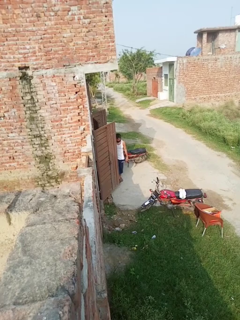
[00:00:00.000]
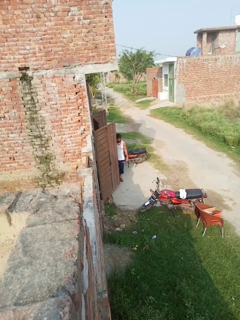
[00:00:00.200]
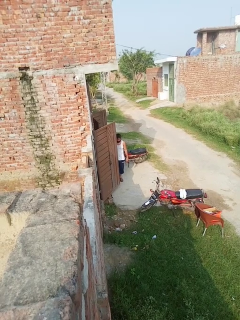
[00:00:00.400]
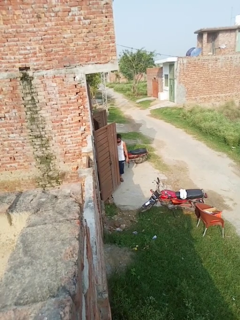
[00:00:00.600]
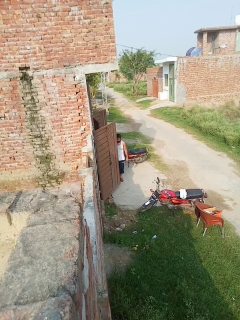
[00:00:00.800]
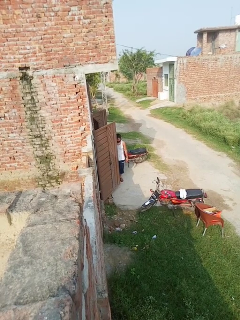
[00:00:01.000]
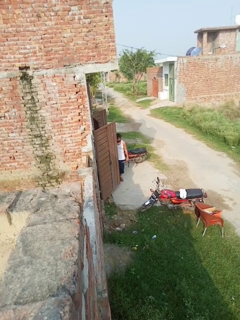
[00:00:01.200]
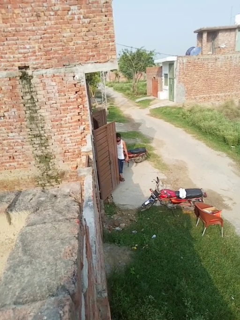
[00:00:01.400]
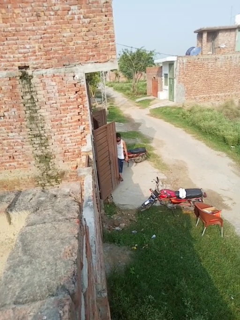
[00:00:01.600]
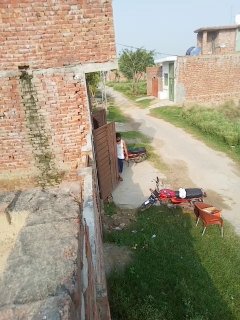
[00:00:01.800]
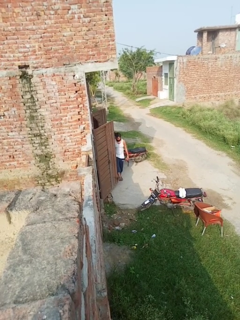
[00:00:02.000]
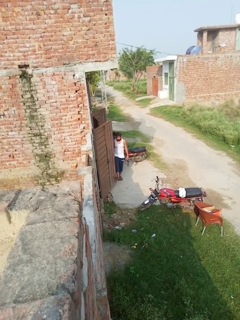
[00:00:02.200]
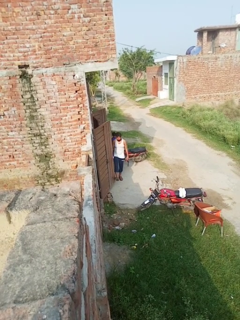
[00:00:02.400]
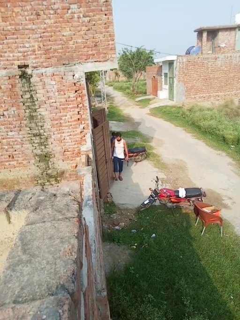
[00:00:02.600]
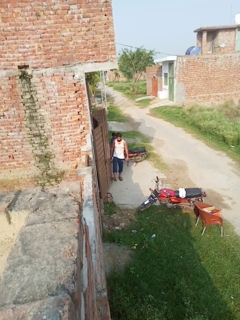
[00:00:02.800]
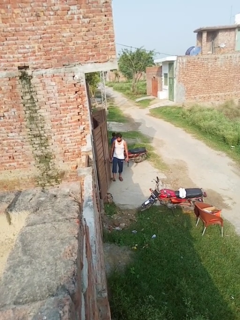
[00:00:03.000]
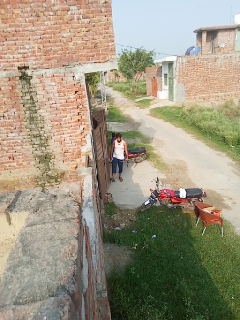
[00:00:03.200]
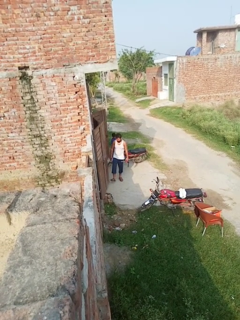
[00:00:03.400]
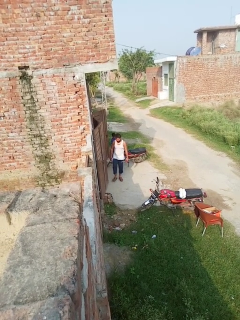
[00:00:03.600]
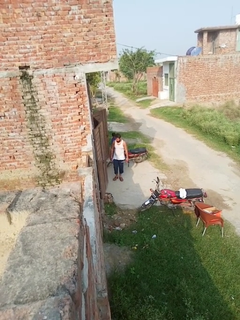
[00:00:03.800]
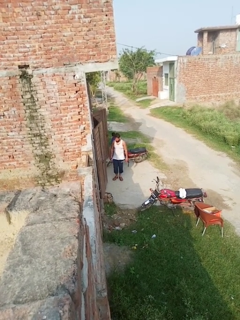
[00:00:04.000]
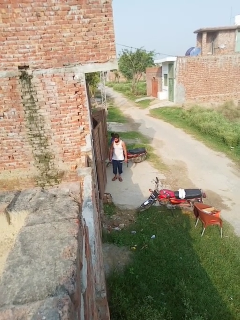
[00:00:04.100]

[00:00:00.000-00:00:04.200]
person closes door with foot

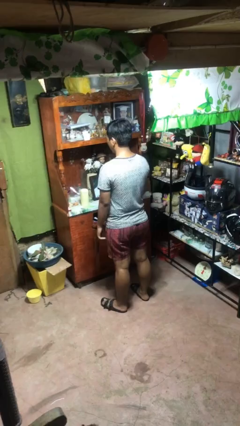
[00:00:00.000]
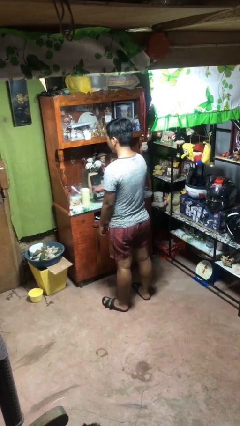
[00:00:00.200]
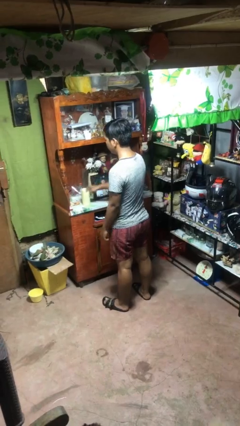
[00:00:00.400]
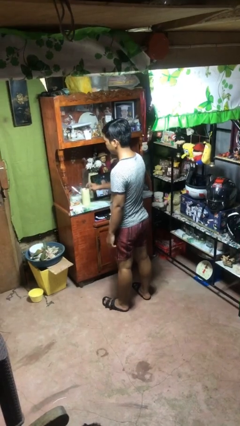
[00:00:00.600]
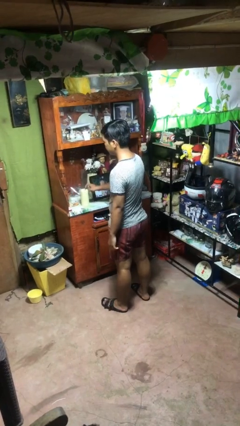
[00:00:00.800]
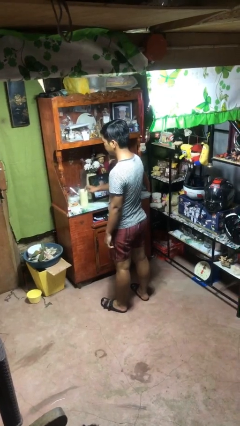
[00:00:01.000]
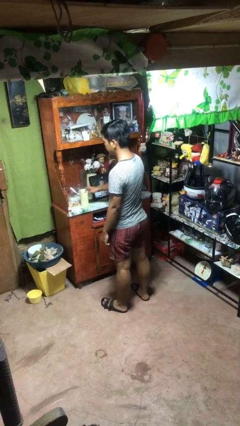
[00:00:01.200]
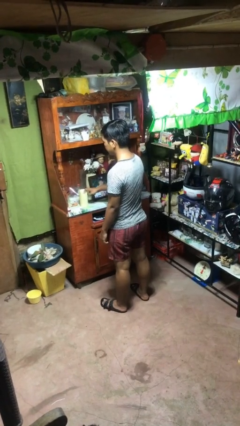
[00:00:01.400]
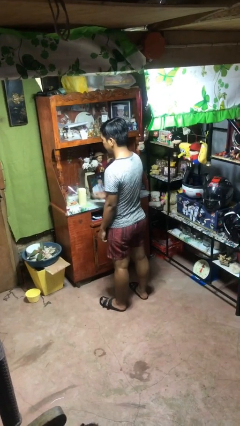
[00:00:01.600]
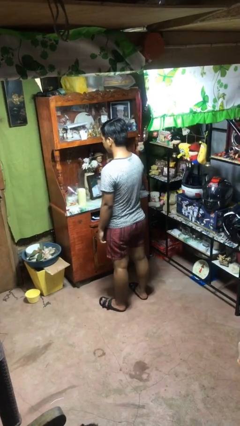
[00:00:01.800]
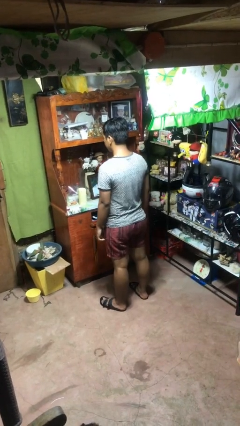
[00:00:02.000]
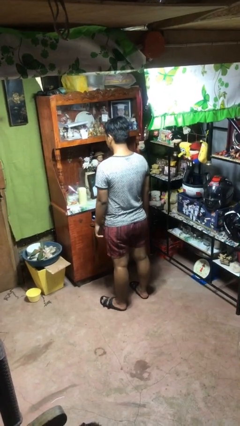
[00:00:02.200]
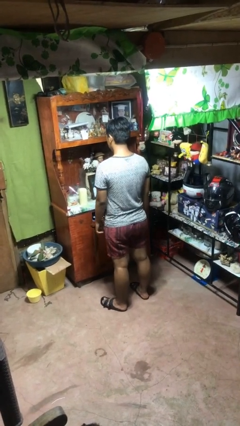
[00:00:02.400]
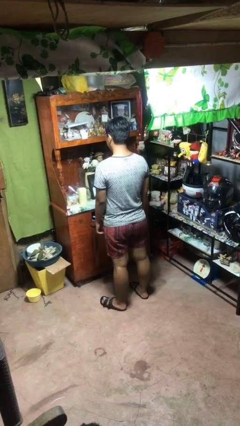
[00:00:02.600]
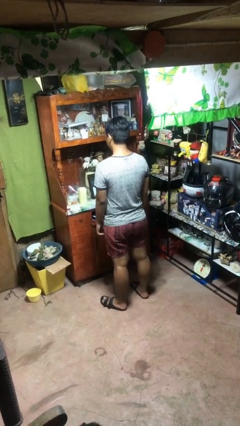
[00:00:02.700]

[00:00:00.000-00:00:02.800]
person taps object with finger

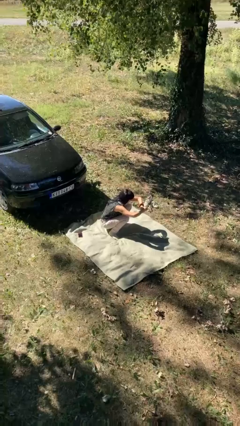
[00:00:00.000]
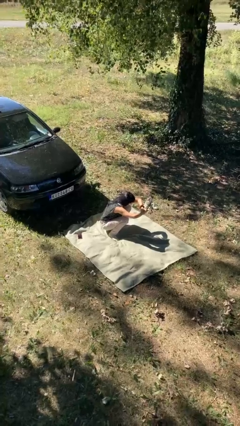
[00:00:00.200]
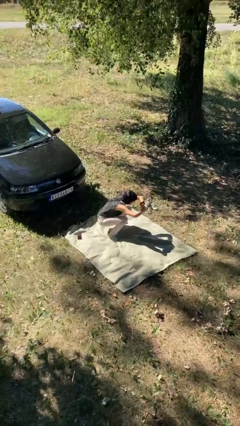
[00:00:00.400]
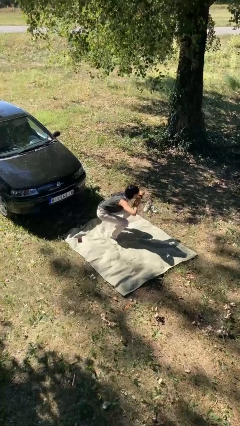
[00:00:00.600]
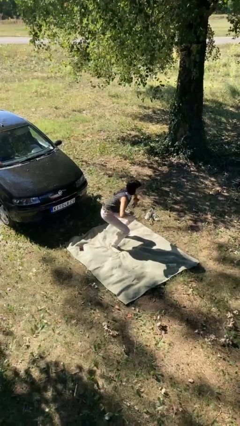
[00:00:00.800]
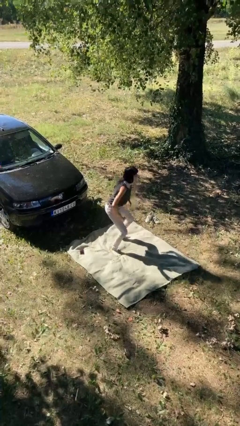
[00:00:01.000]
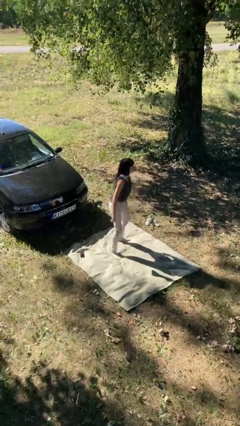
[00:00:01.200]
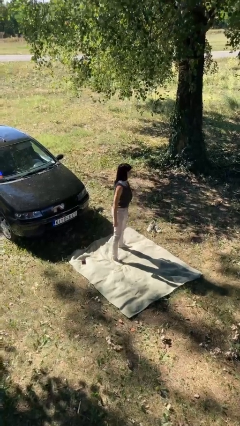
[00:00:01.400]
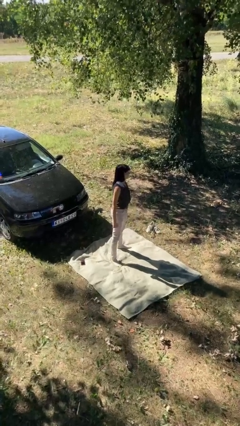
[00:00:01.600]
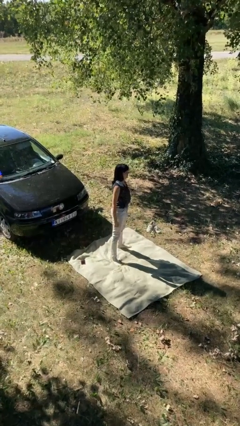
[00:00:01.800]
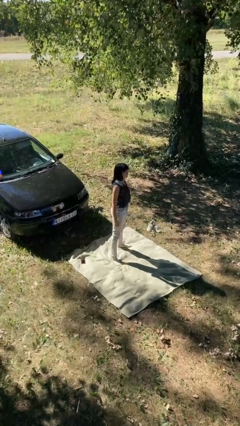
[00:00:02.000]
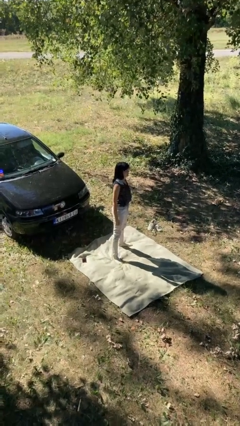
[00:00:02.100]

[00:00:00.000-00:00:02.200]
person stands up

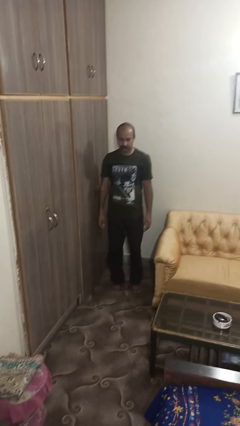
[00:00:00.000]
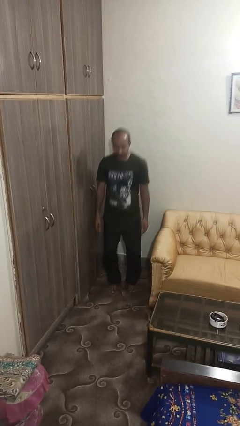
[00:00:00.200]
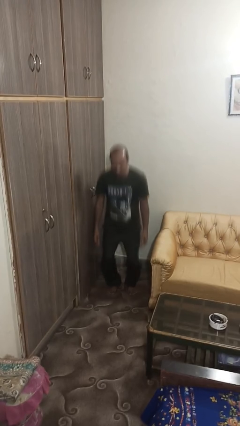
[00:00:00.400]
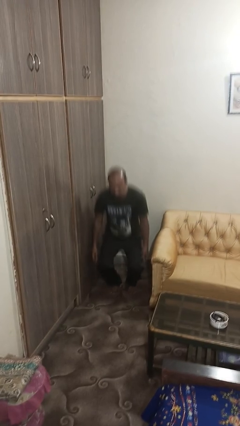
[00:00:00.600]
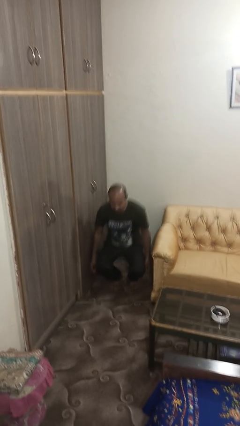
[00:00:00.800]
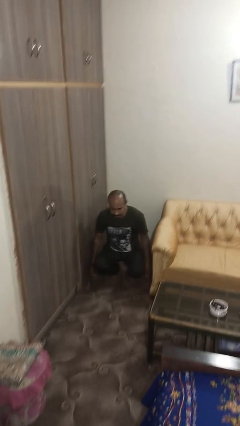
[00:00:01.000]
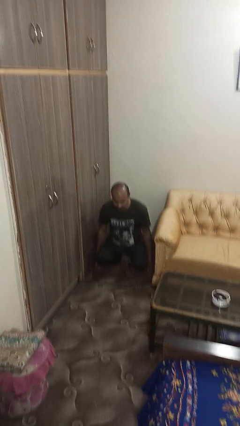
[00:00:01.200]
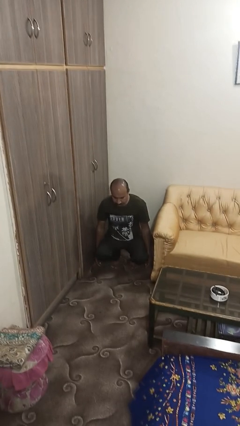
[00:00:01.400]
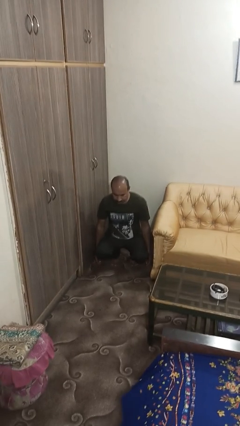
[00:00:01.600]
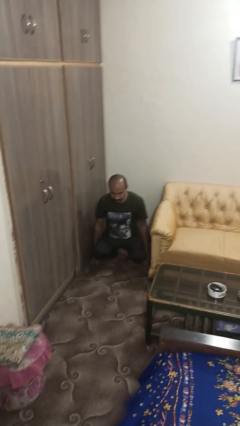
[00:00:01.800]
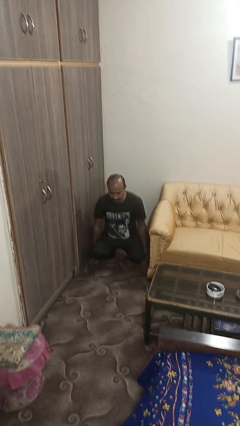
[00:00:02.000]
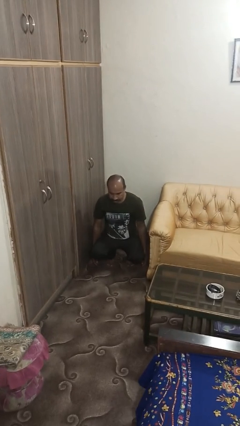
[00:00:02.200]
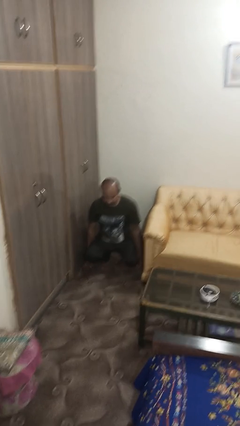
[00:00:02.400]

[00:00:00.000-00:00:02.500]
person squats

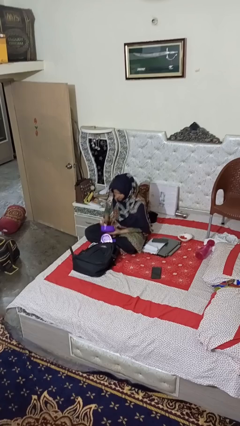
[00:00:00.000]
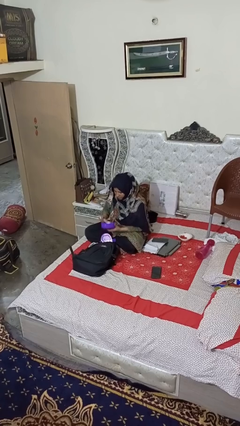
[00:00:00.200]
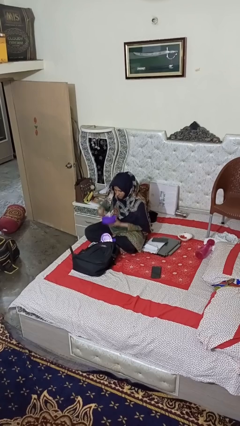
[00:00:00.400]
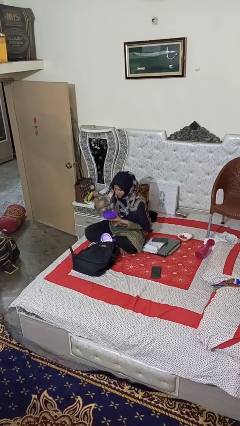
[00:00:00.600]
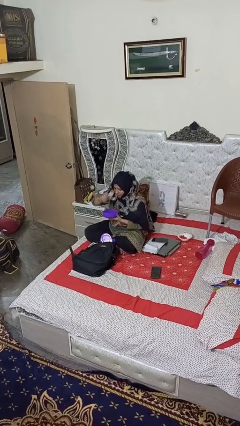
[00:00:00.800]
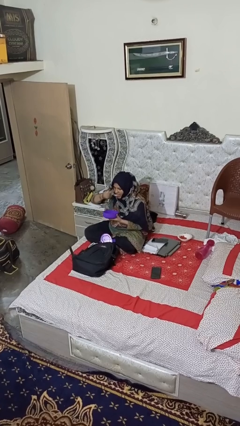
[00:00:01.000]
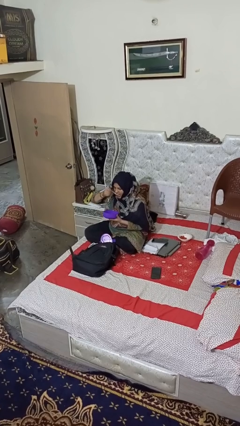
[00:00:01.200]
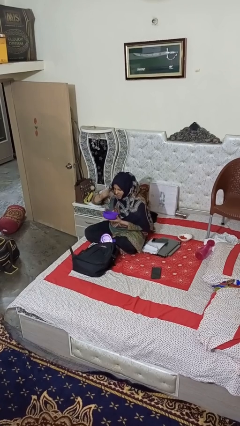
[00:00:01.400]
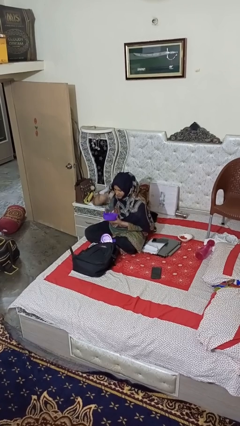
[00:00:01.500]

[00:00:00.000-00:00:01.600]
person eats snack from bag

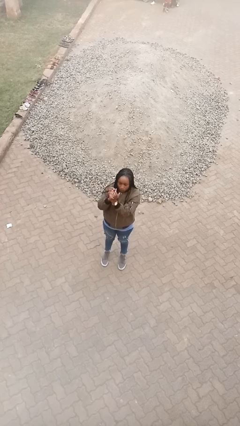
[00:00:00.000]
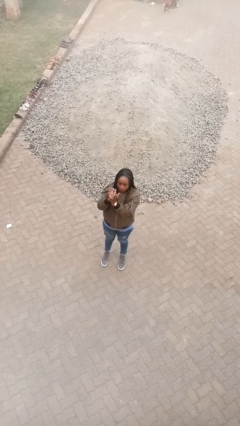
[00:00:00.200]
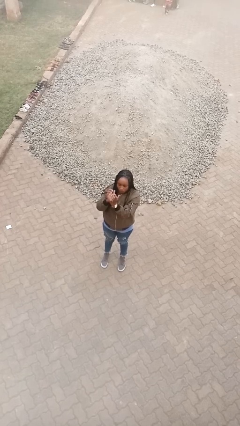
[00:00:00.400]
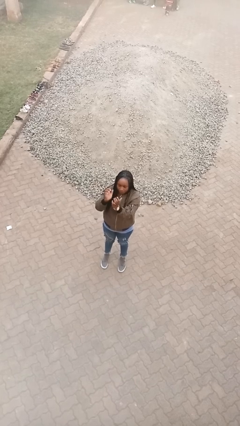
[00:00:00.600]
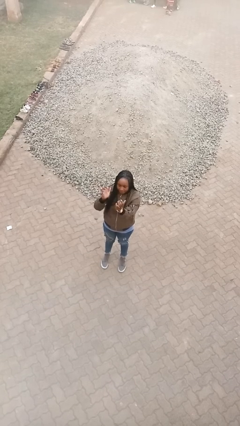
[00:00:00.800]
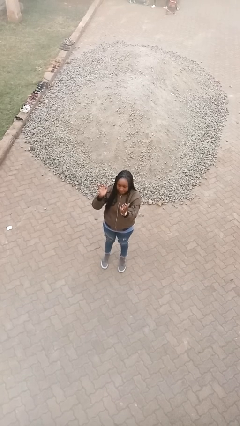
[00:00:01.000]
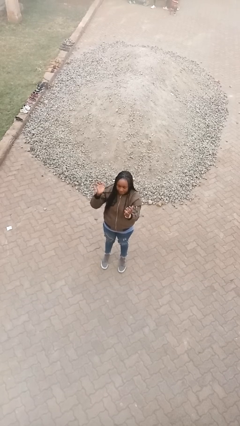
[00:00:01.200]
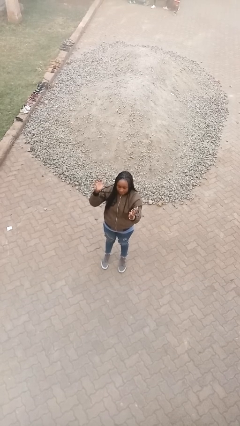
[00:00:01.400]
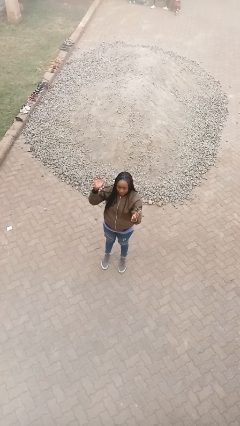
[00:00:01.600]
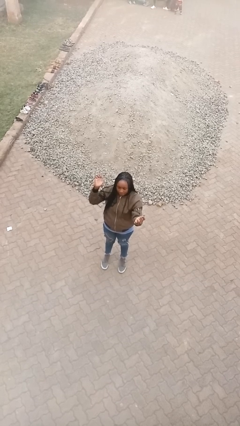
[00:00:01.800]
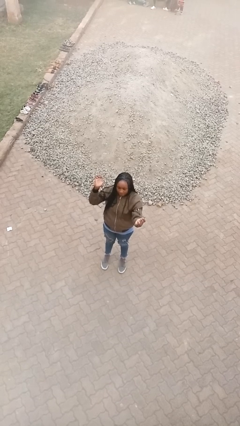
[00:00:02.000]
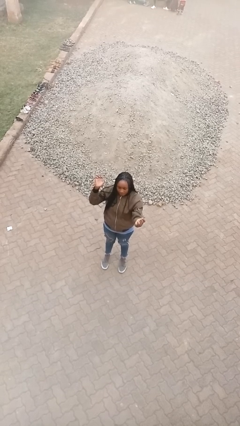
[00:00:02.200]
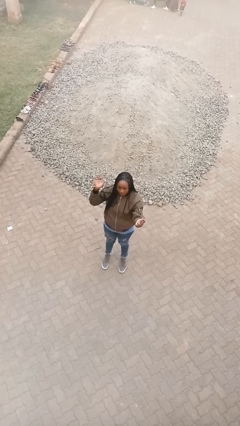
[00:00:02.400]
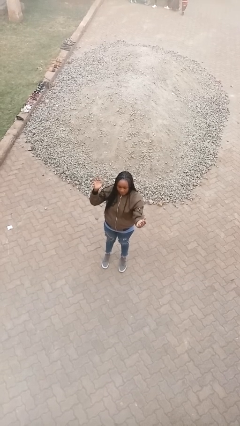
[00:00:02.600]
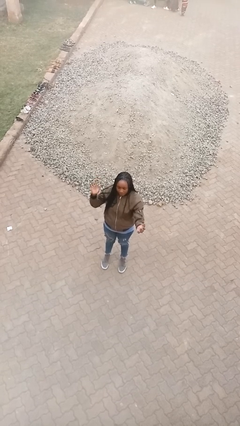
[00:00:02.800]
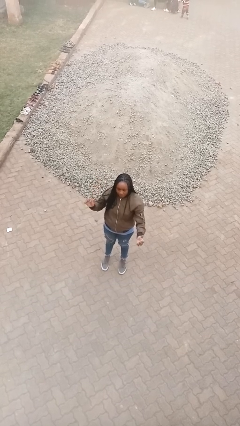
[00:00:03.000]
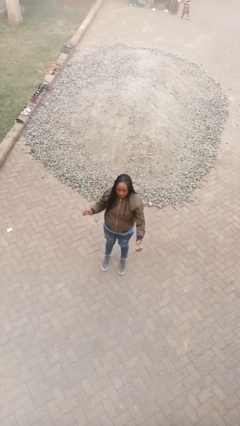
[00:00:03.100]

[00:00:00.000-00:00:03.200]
person gestures zoom out

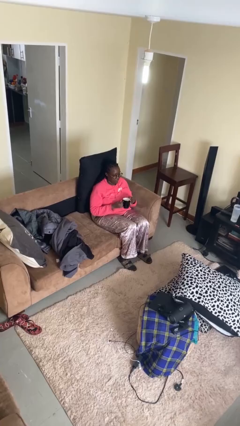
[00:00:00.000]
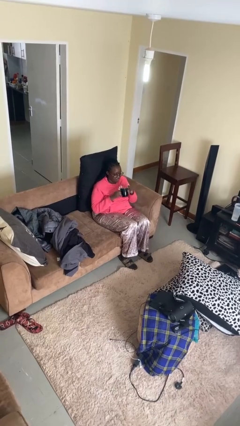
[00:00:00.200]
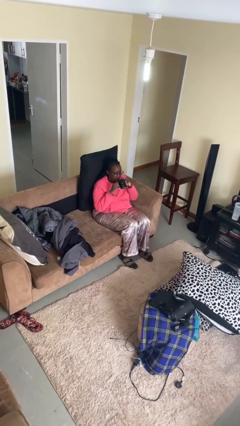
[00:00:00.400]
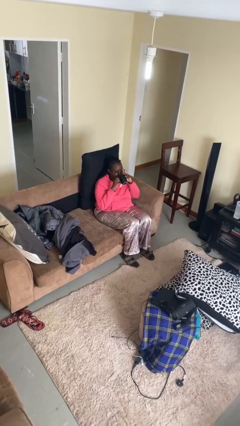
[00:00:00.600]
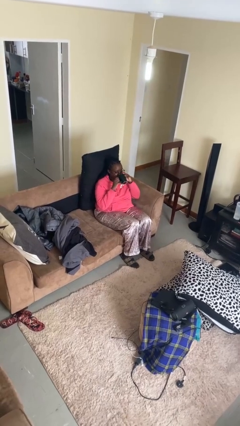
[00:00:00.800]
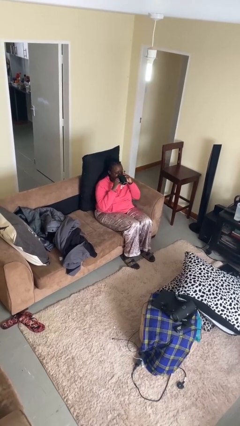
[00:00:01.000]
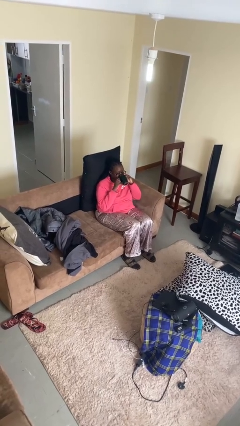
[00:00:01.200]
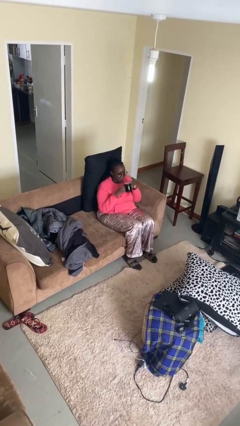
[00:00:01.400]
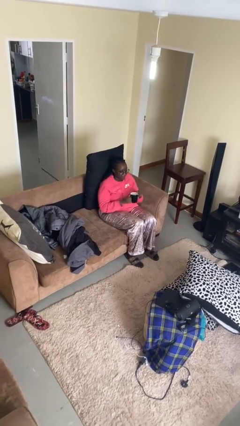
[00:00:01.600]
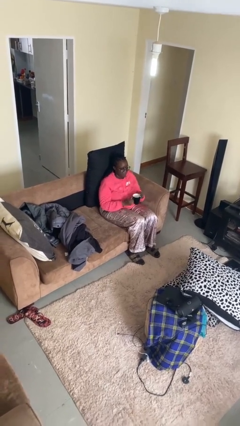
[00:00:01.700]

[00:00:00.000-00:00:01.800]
person drinks from mug
